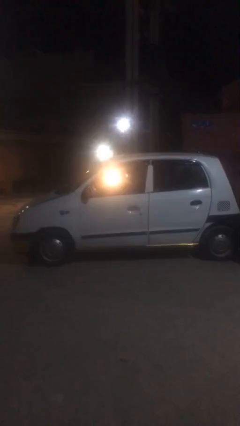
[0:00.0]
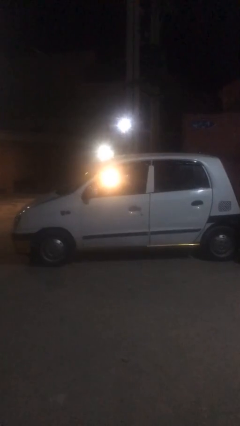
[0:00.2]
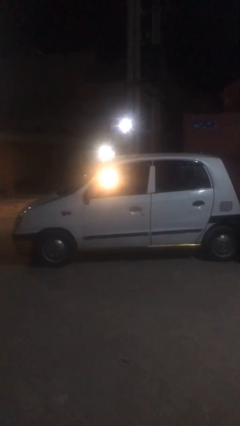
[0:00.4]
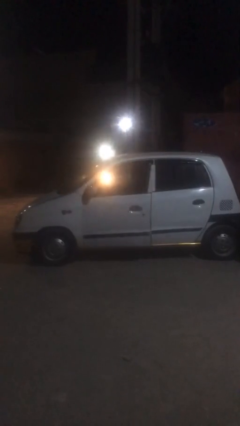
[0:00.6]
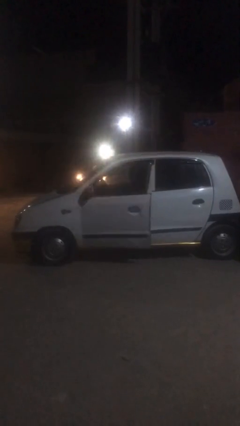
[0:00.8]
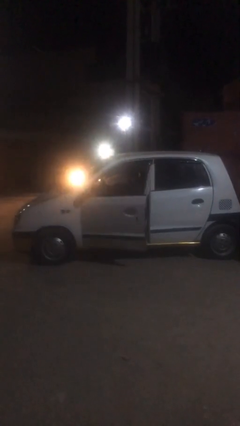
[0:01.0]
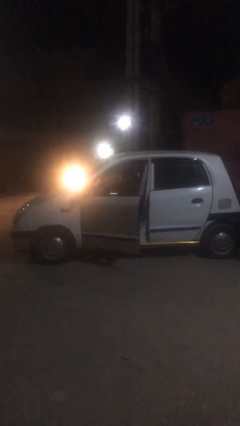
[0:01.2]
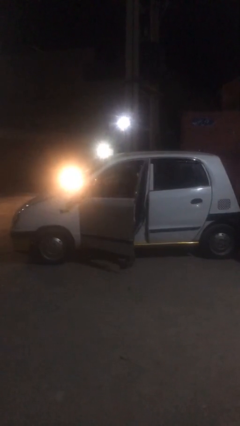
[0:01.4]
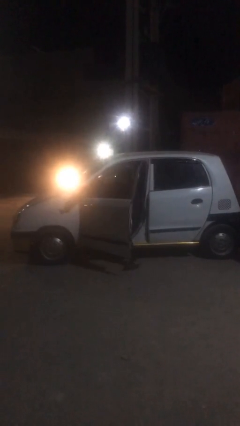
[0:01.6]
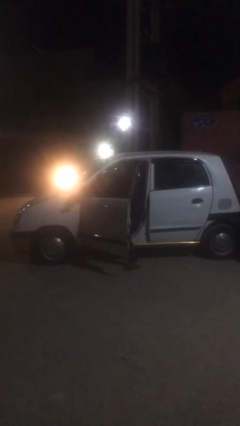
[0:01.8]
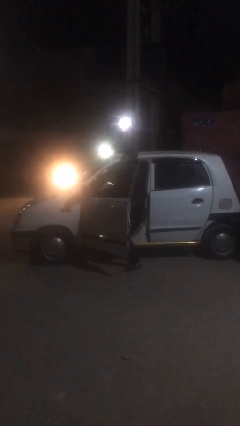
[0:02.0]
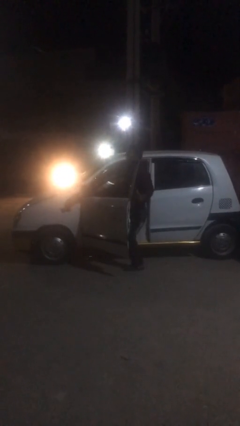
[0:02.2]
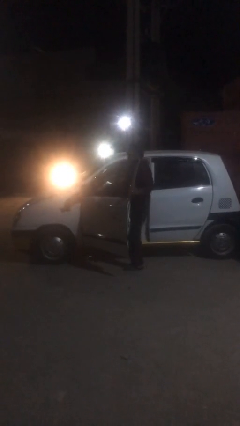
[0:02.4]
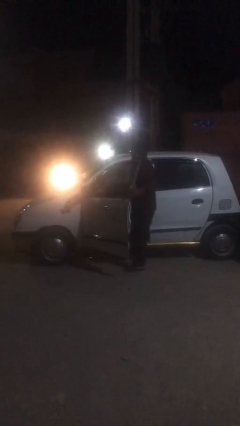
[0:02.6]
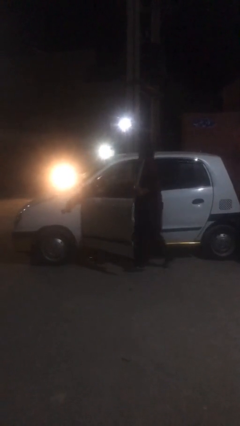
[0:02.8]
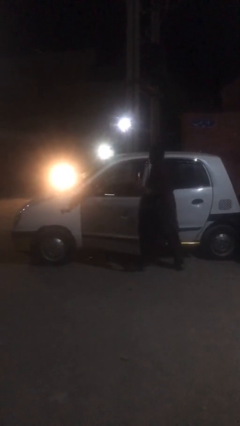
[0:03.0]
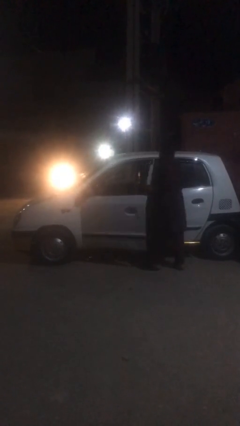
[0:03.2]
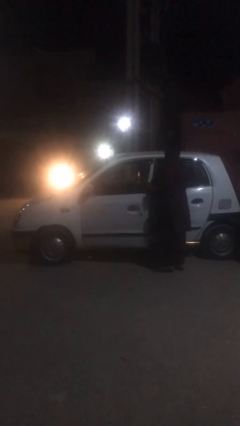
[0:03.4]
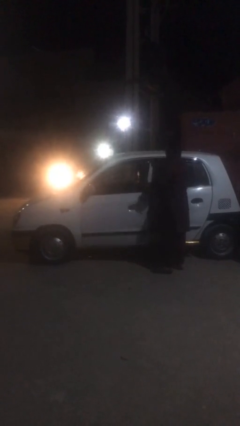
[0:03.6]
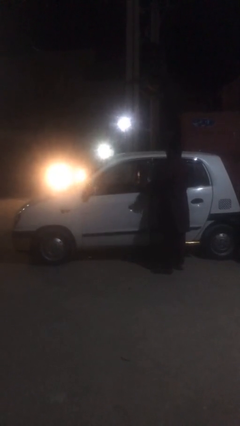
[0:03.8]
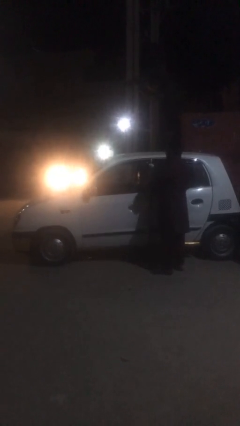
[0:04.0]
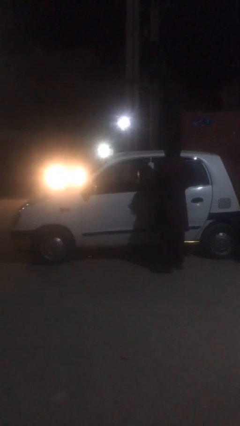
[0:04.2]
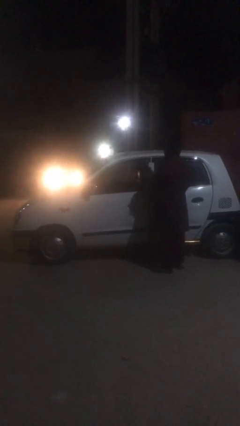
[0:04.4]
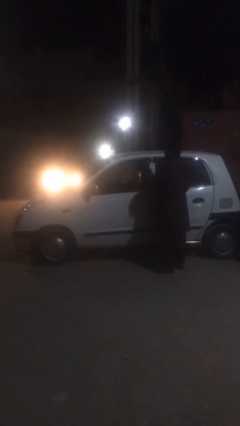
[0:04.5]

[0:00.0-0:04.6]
car drops off person

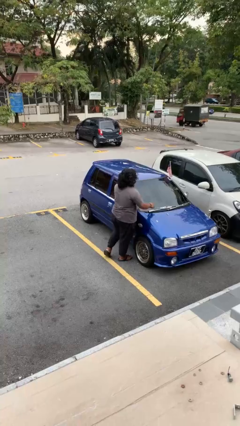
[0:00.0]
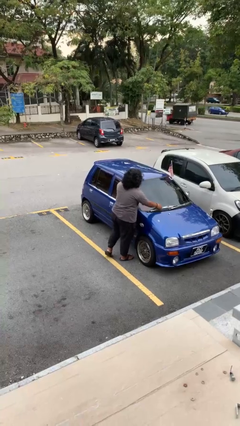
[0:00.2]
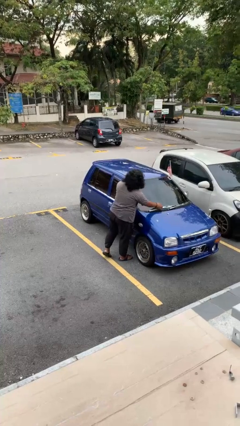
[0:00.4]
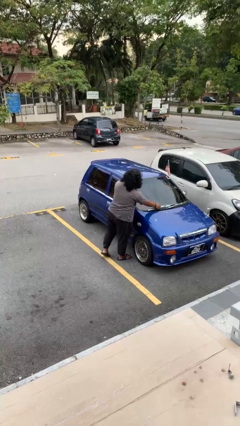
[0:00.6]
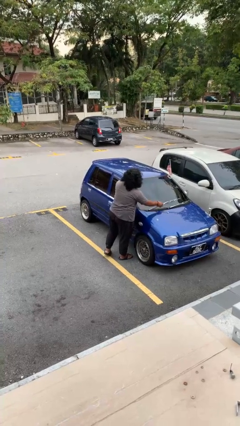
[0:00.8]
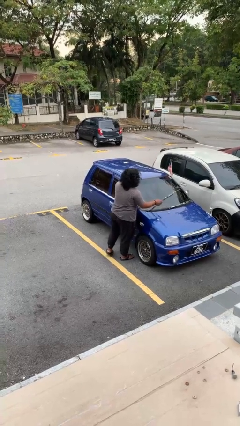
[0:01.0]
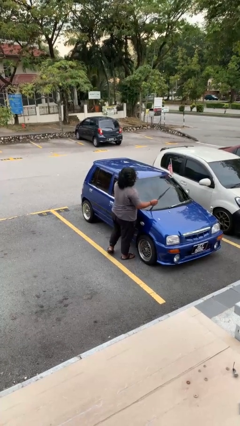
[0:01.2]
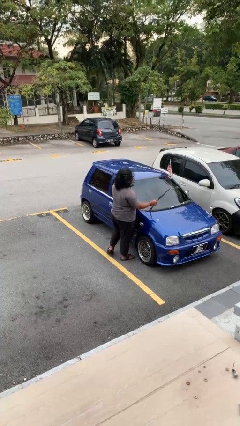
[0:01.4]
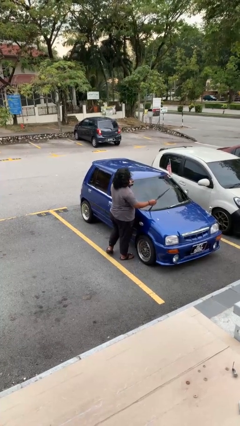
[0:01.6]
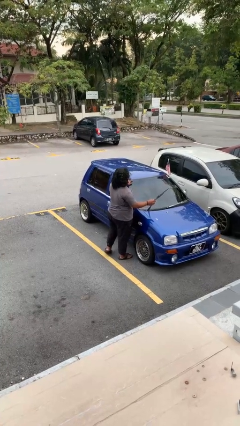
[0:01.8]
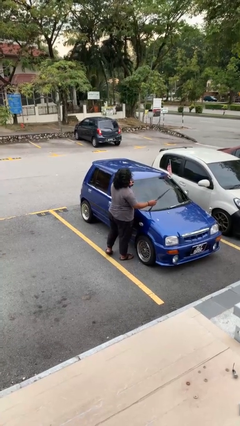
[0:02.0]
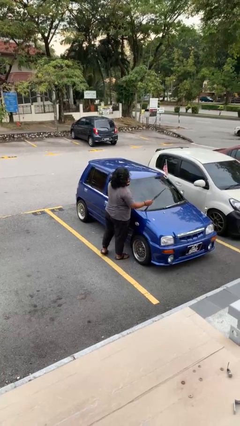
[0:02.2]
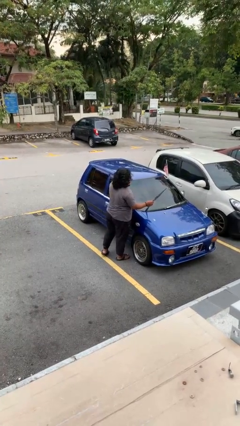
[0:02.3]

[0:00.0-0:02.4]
person flips up car wipers

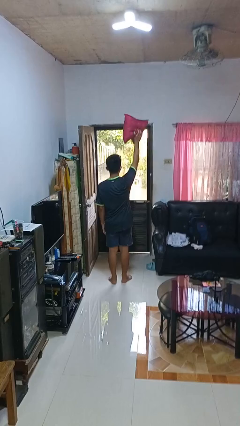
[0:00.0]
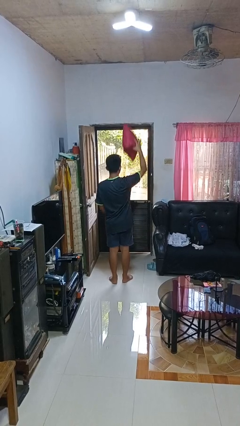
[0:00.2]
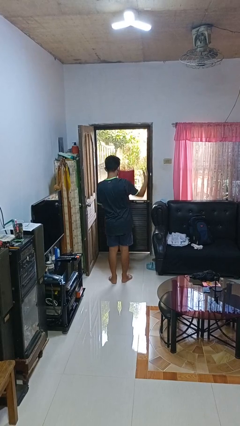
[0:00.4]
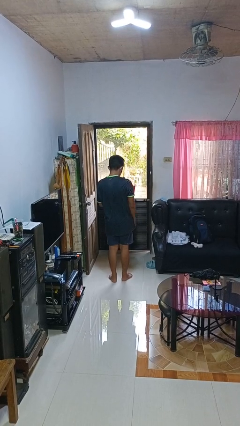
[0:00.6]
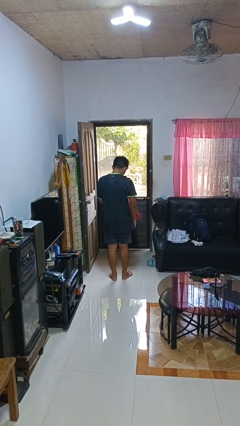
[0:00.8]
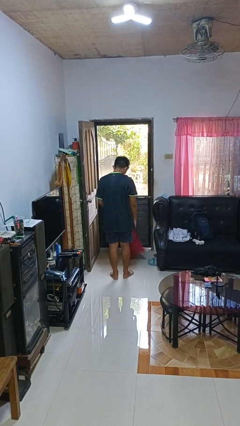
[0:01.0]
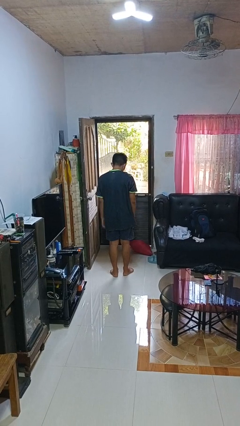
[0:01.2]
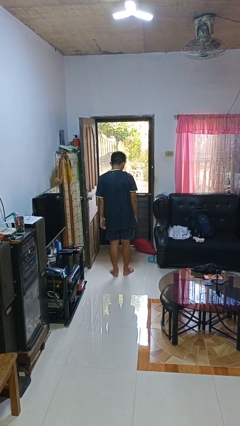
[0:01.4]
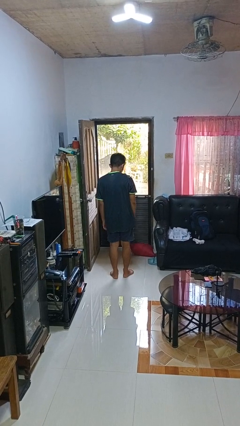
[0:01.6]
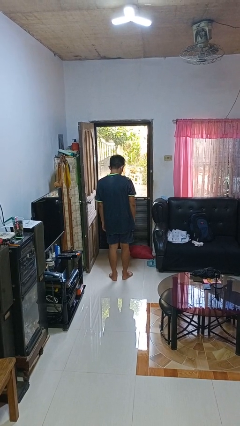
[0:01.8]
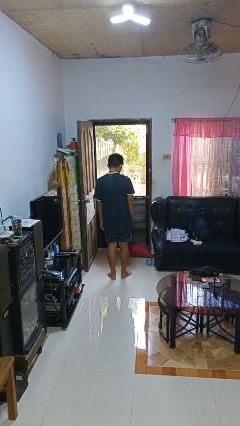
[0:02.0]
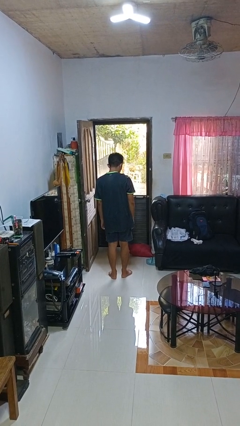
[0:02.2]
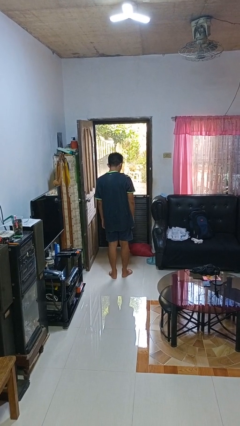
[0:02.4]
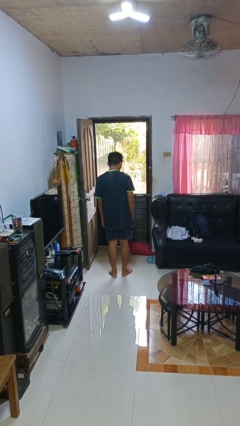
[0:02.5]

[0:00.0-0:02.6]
person drops object

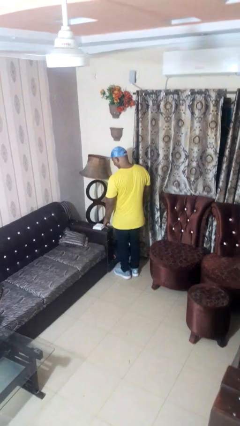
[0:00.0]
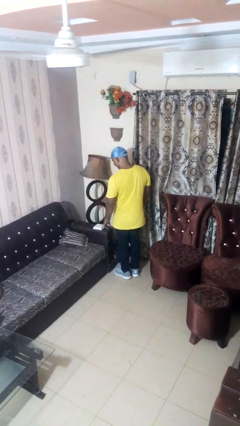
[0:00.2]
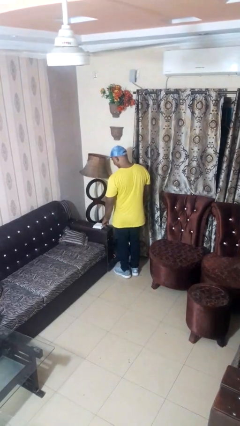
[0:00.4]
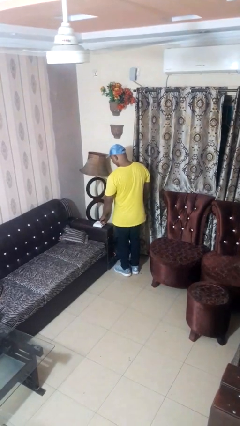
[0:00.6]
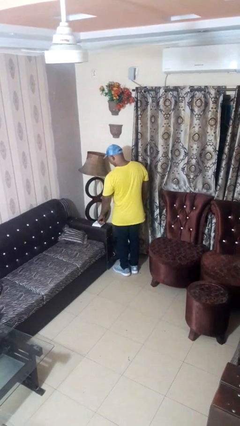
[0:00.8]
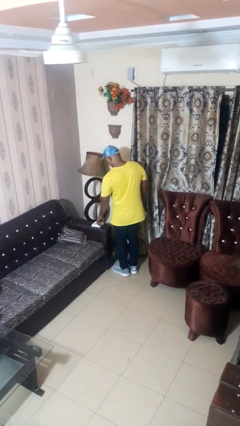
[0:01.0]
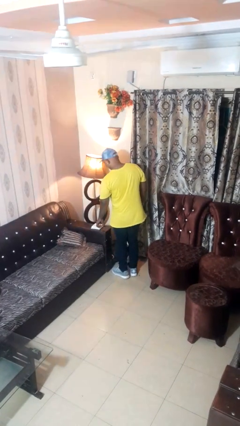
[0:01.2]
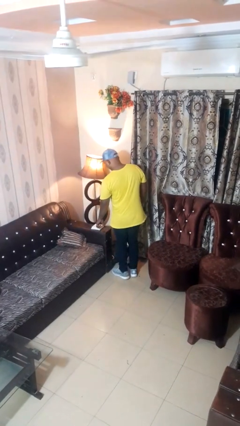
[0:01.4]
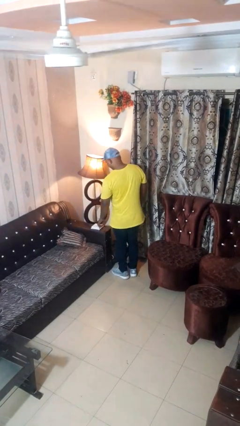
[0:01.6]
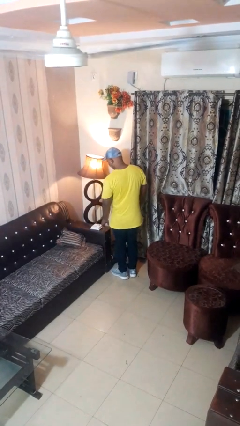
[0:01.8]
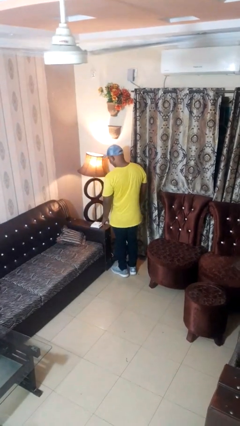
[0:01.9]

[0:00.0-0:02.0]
person turns on lamp

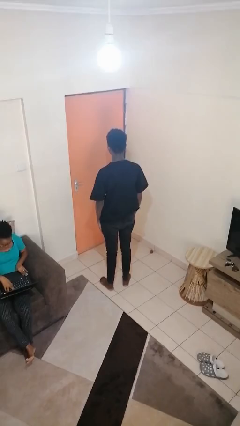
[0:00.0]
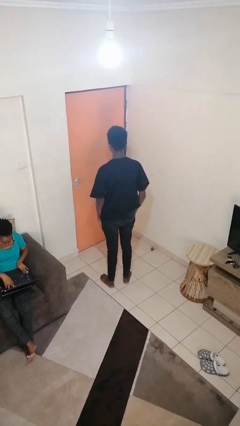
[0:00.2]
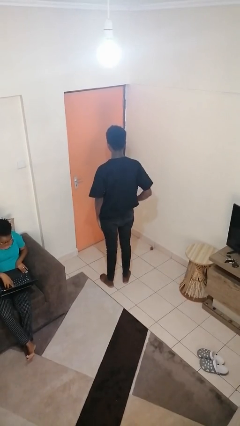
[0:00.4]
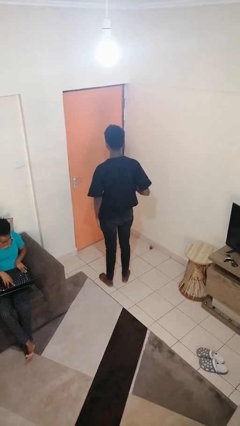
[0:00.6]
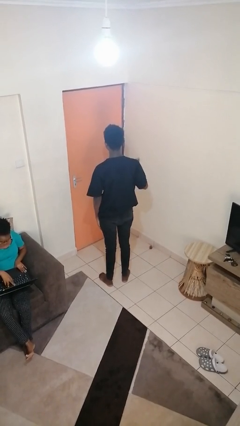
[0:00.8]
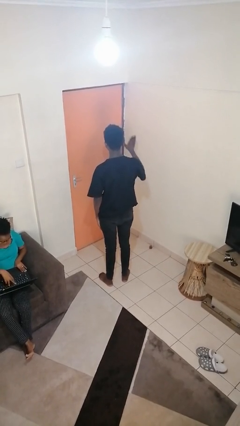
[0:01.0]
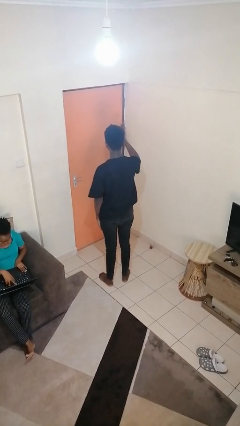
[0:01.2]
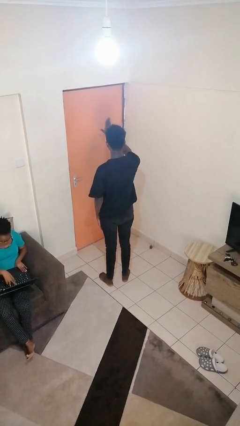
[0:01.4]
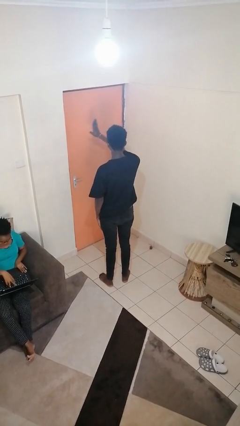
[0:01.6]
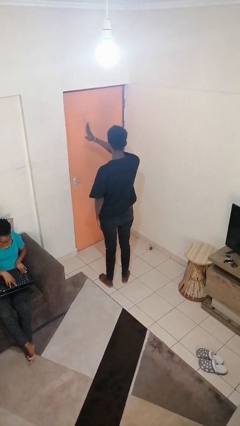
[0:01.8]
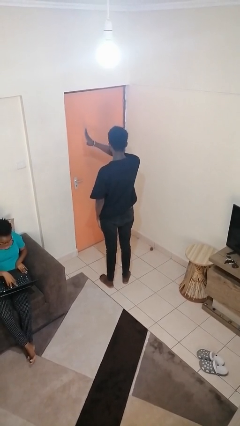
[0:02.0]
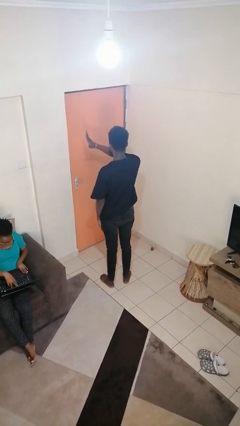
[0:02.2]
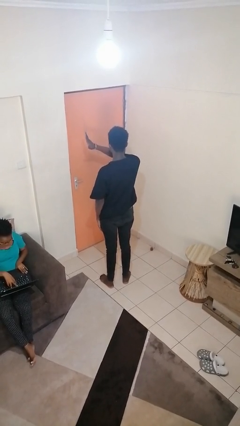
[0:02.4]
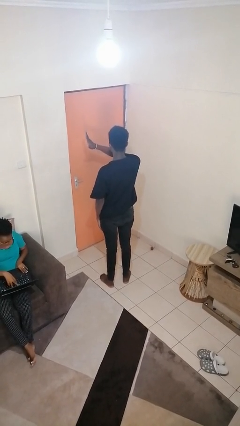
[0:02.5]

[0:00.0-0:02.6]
person gestures swipe left

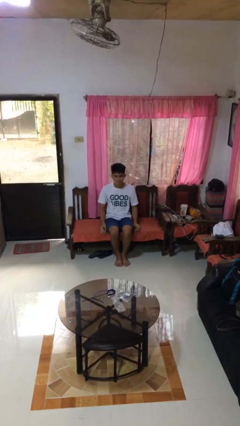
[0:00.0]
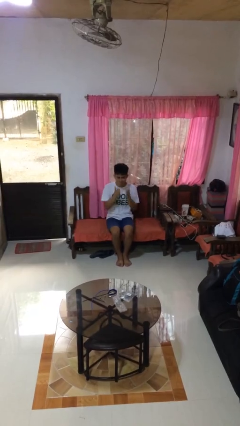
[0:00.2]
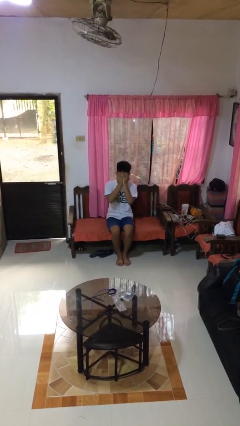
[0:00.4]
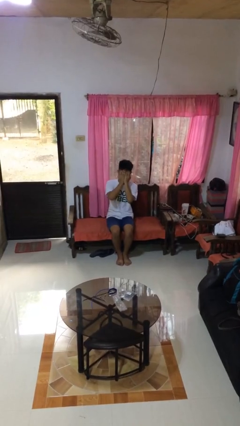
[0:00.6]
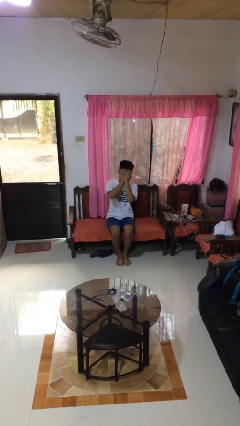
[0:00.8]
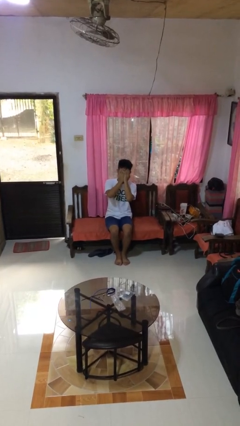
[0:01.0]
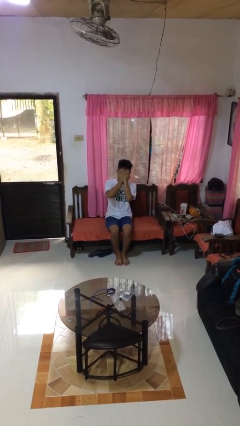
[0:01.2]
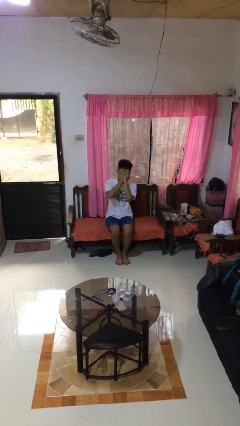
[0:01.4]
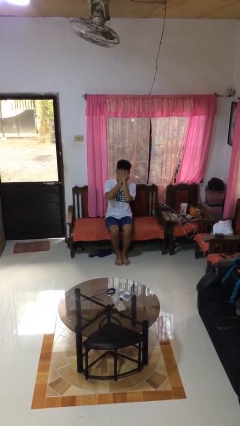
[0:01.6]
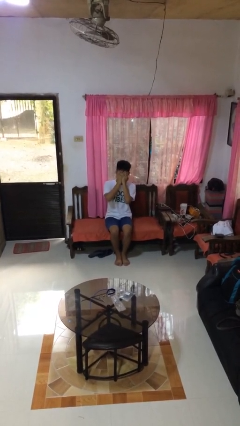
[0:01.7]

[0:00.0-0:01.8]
person covers face with hands

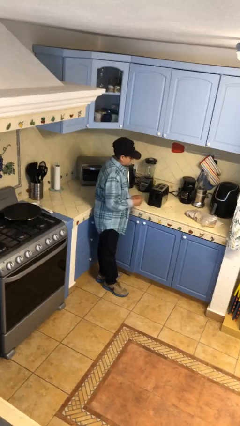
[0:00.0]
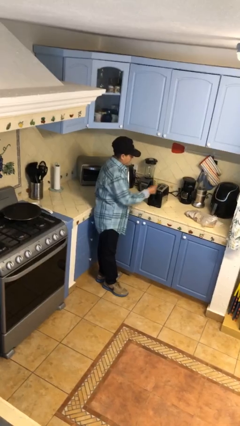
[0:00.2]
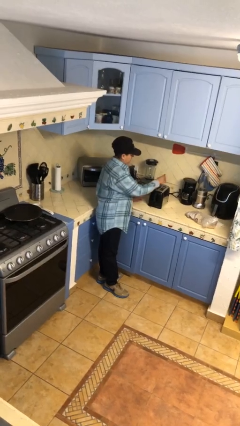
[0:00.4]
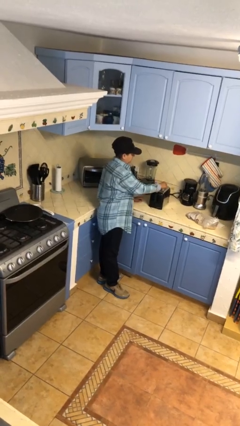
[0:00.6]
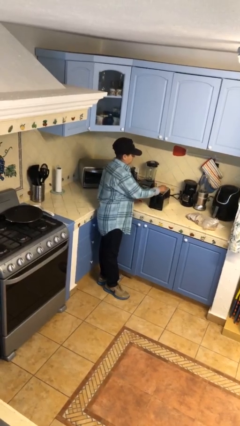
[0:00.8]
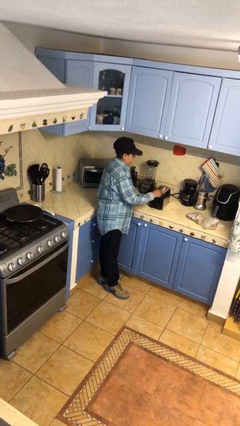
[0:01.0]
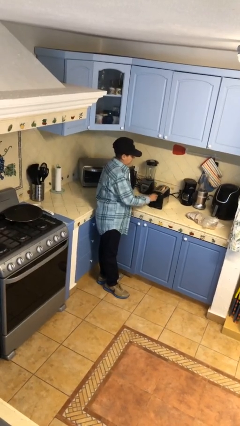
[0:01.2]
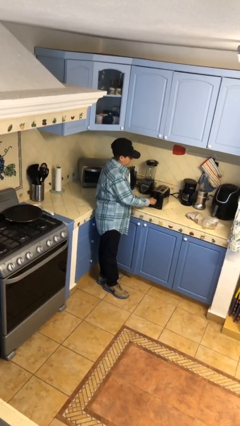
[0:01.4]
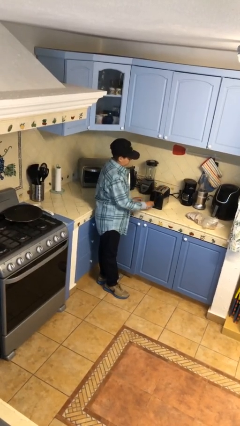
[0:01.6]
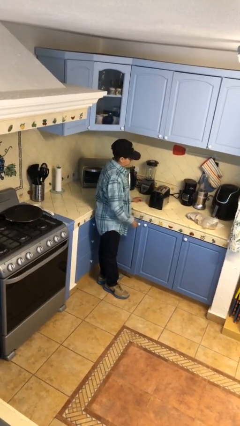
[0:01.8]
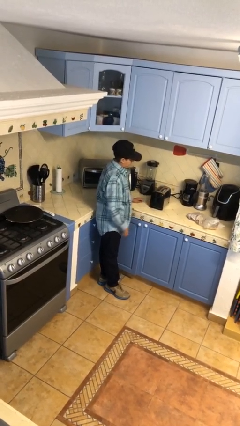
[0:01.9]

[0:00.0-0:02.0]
person puts object into toaster
